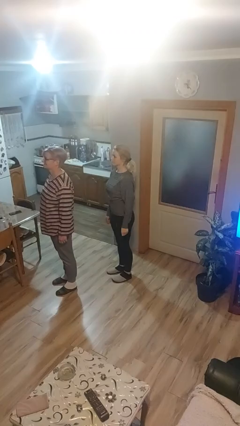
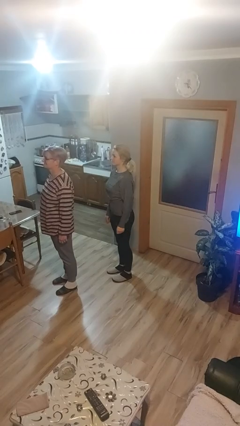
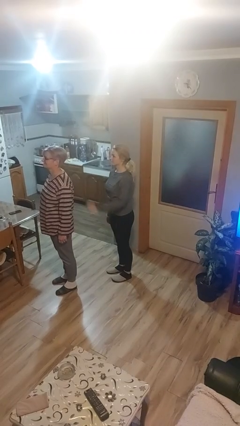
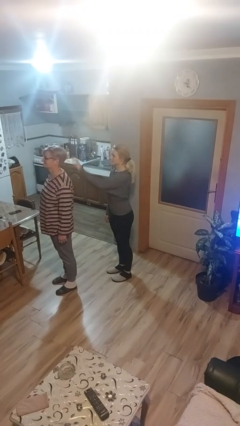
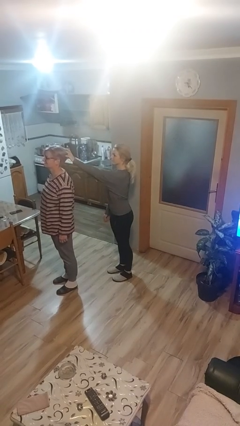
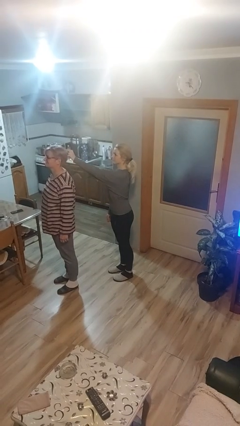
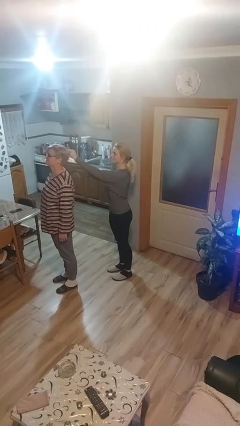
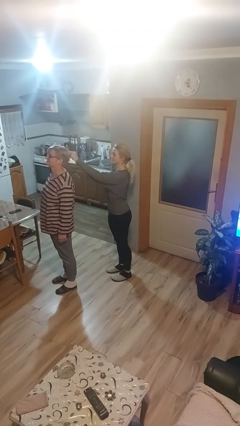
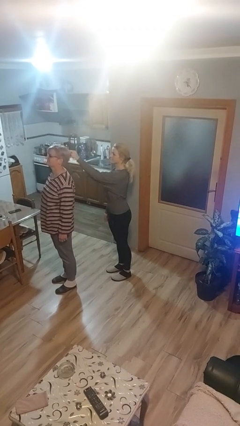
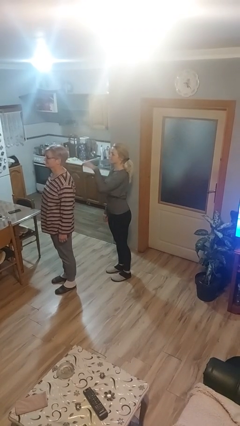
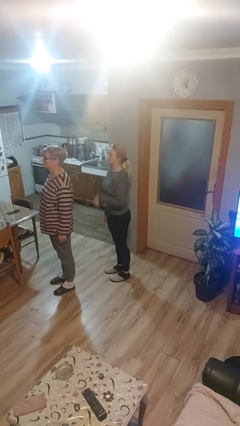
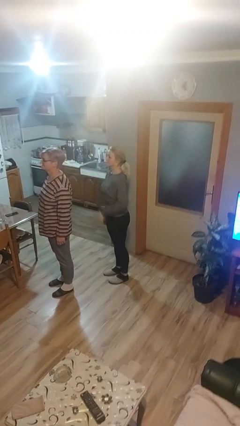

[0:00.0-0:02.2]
person grabs person by hair

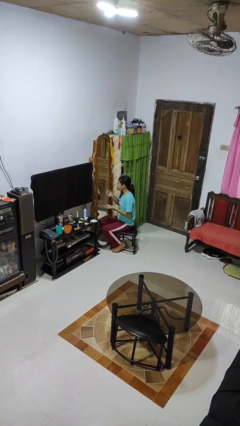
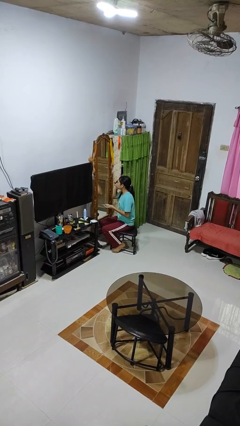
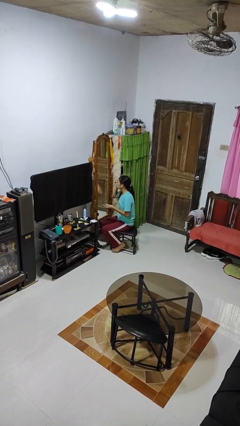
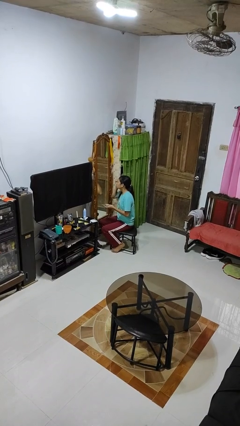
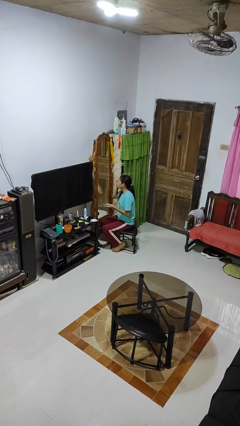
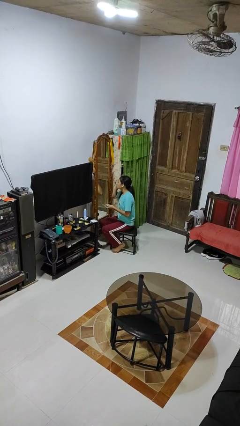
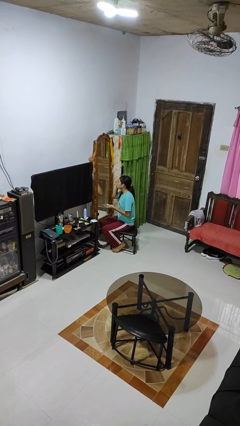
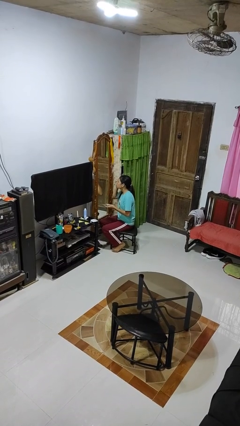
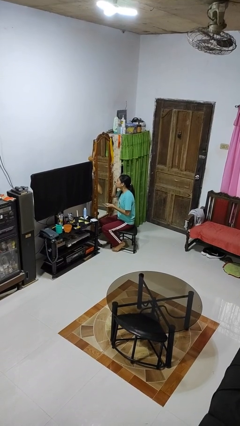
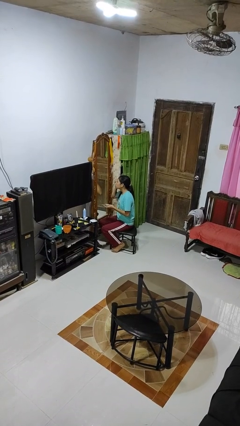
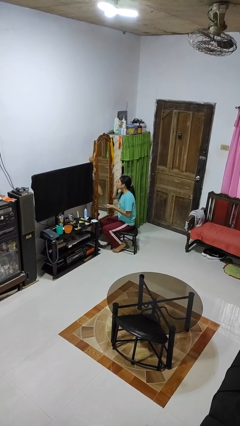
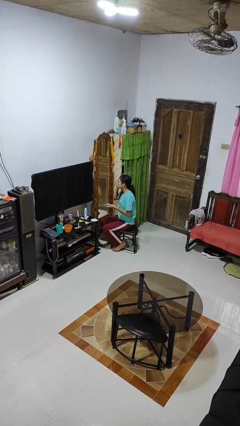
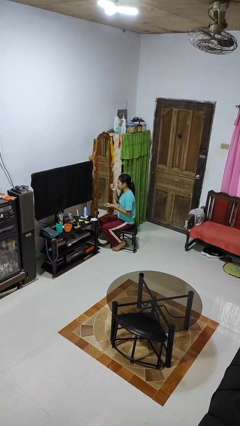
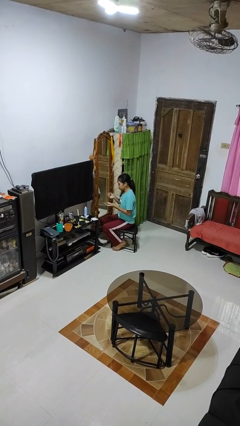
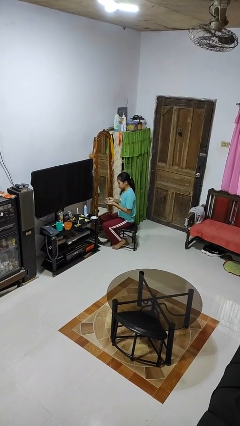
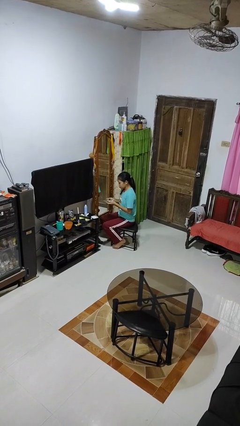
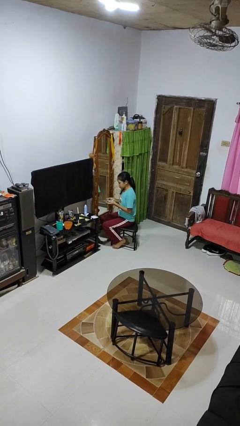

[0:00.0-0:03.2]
person applies eye makeup

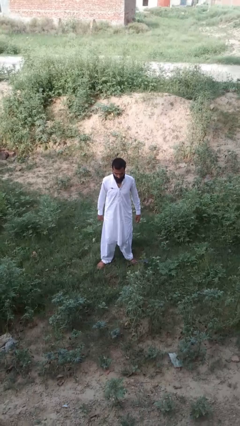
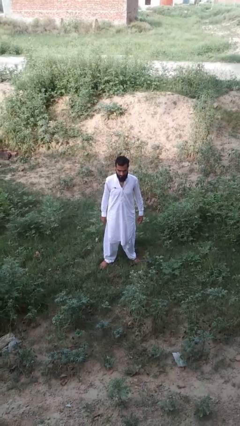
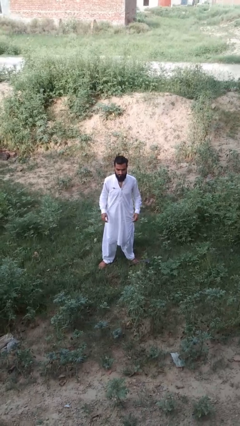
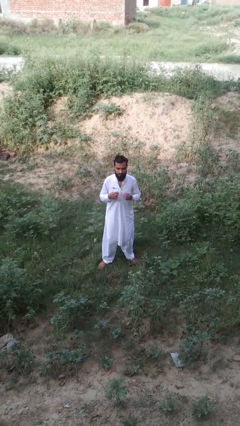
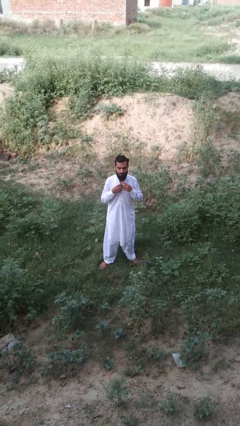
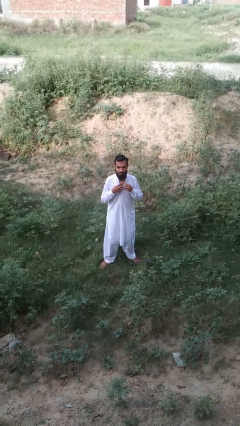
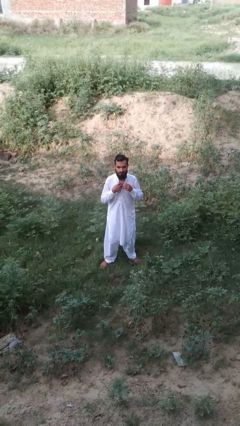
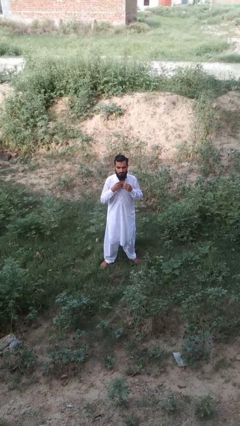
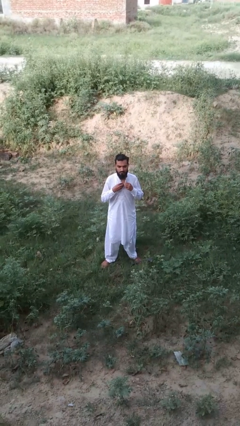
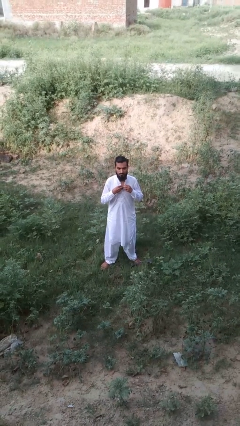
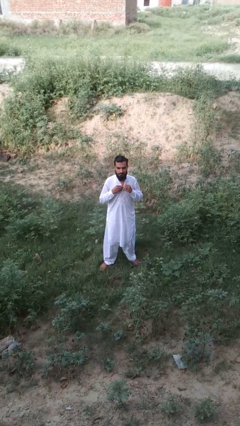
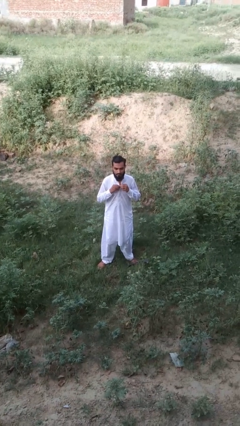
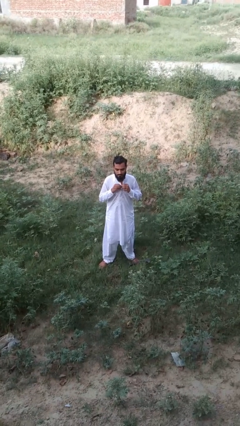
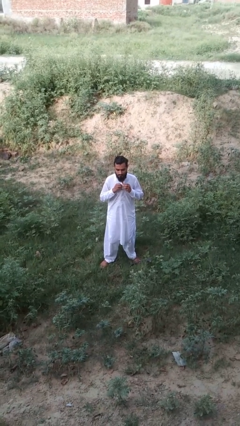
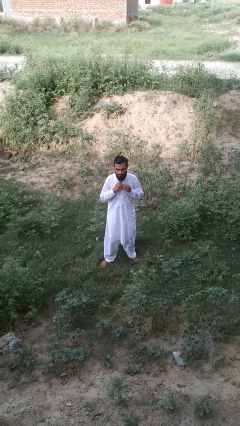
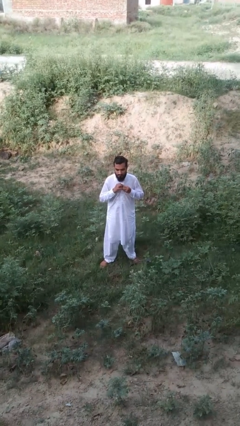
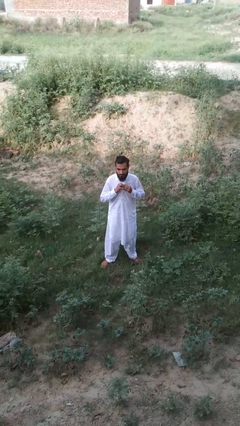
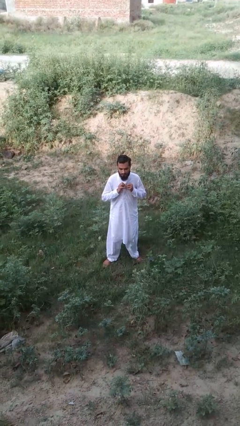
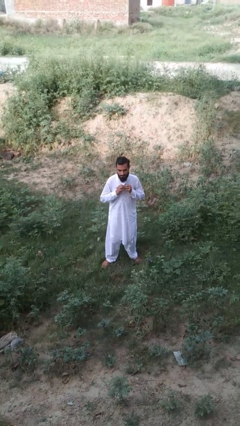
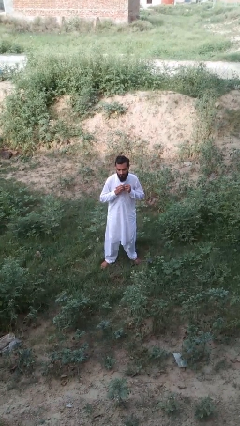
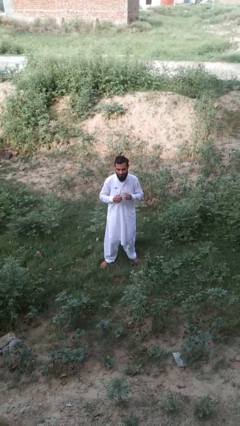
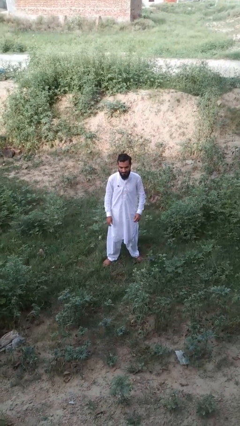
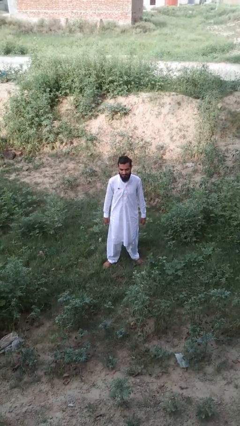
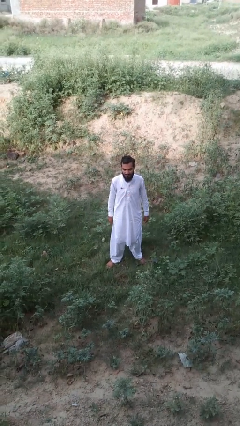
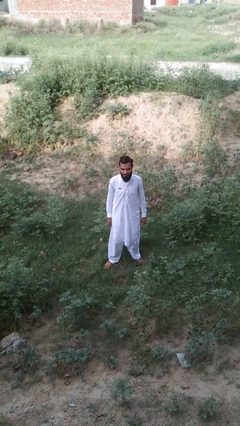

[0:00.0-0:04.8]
person buttons shirt

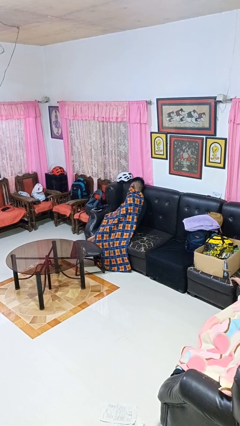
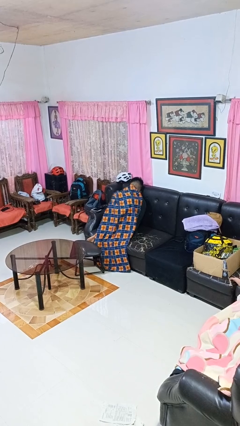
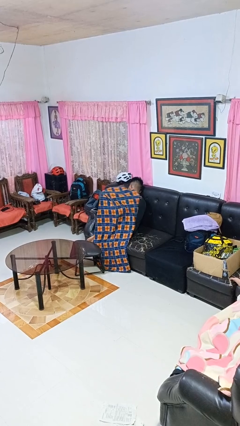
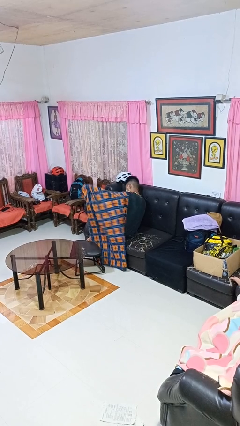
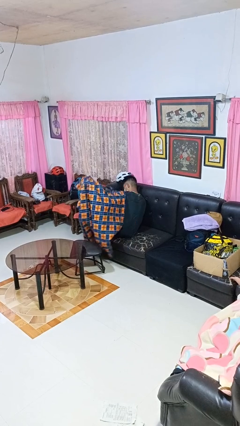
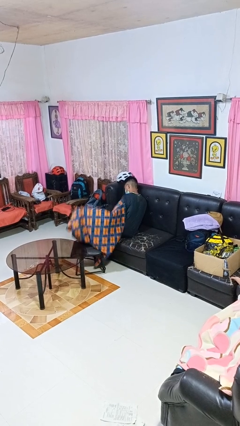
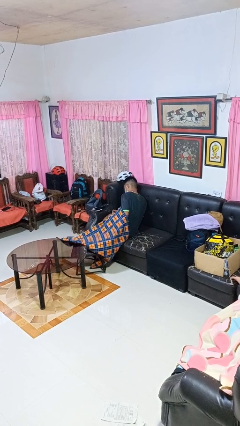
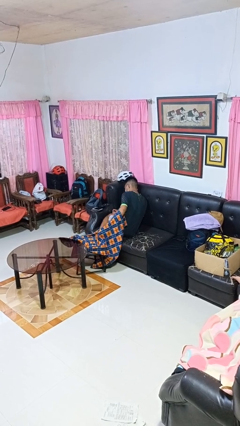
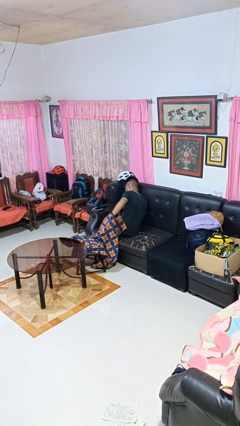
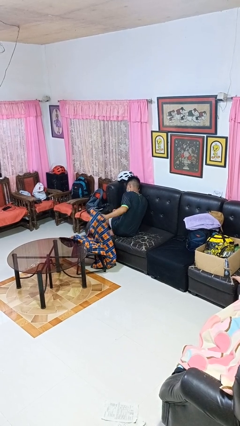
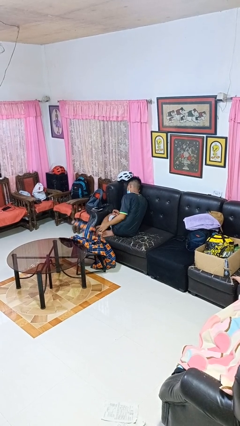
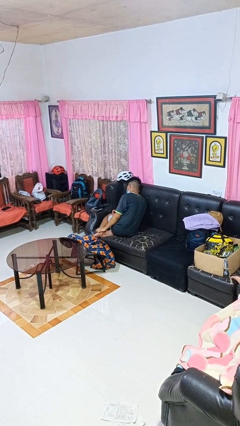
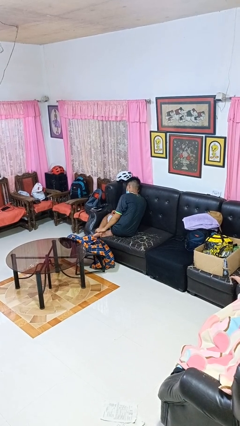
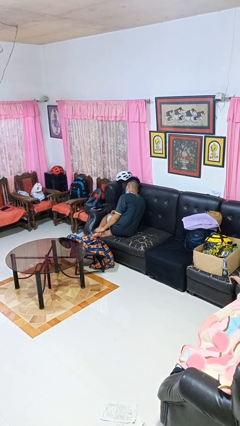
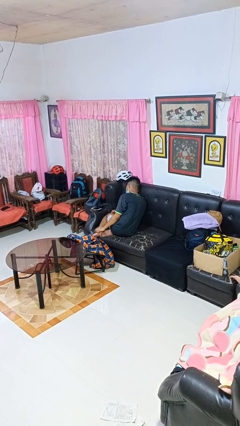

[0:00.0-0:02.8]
person uncovers with blanket

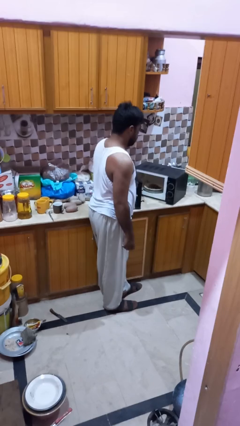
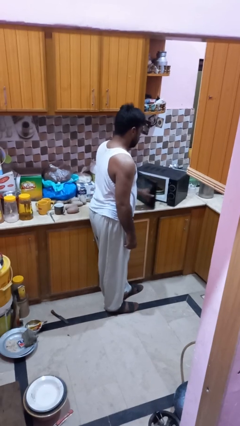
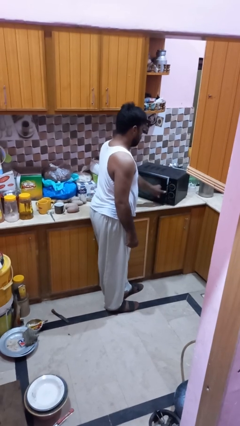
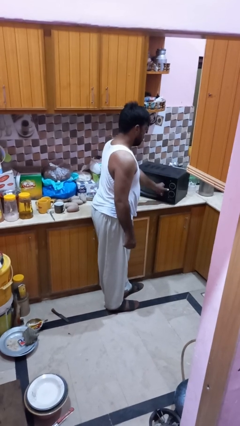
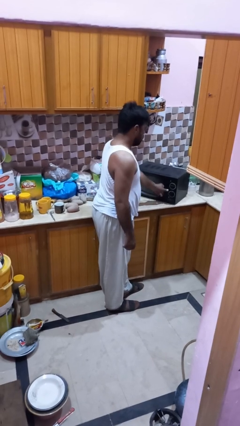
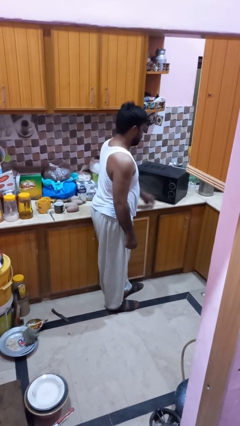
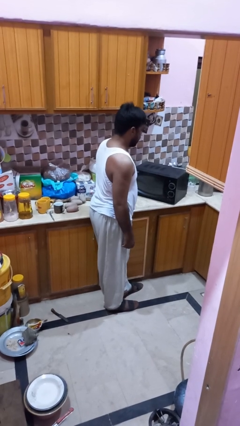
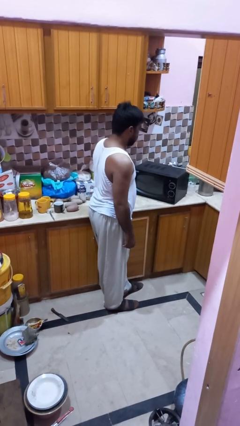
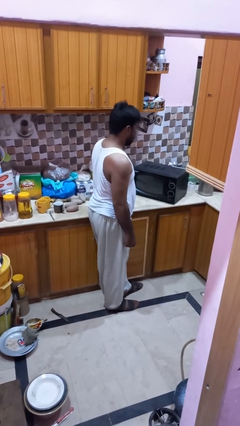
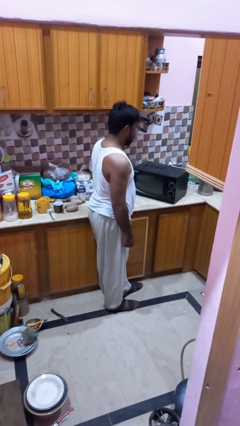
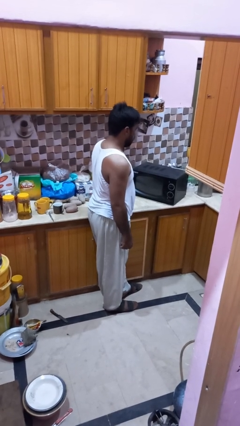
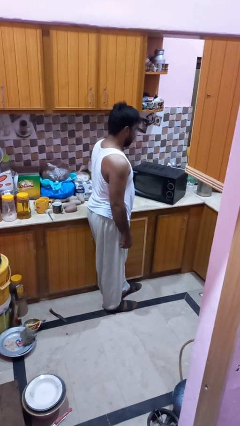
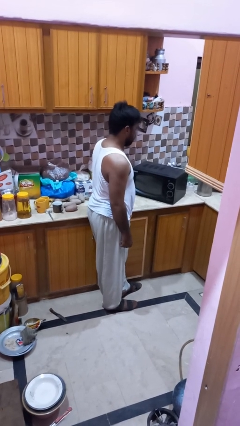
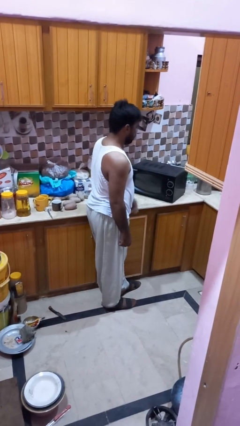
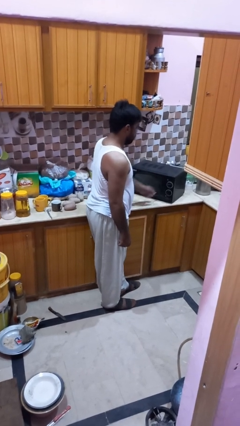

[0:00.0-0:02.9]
person closes microwave

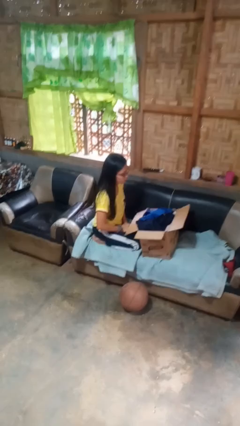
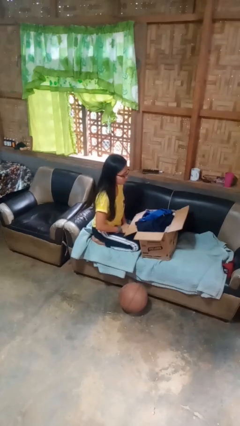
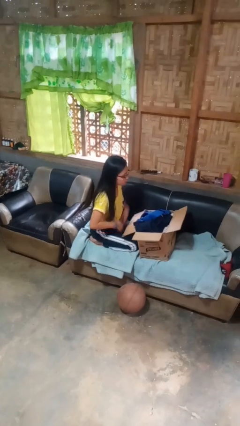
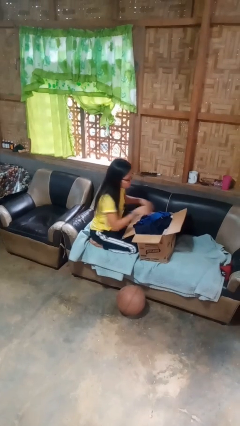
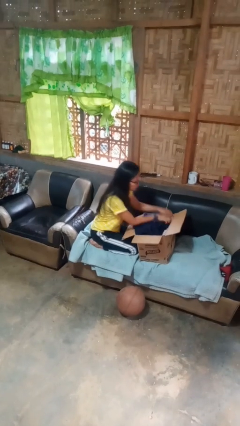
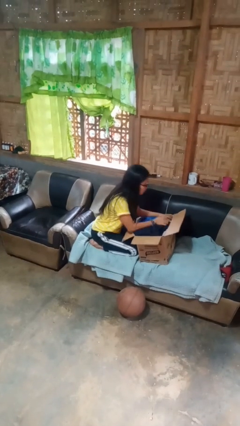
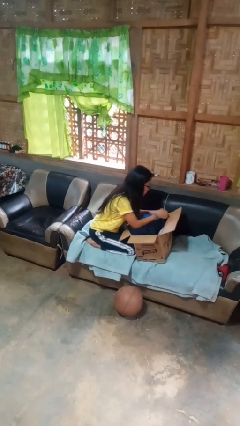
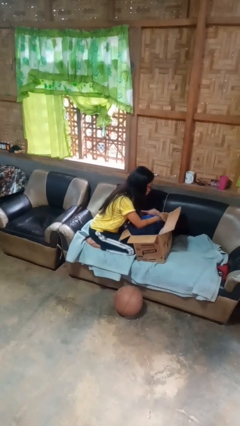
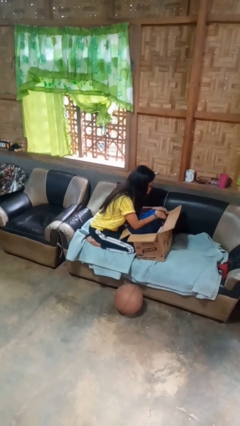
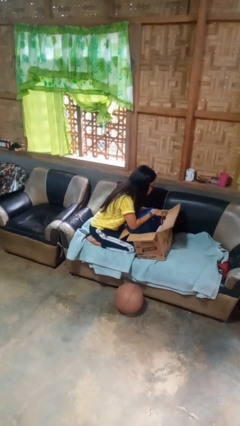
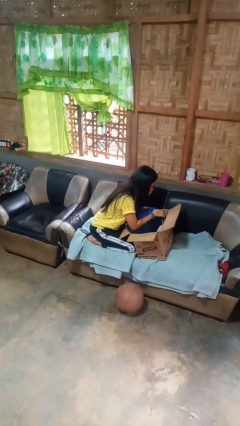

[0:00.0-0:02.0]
person searches in box
